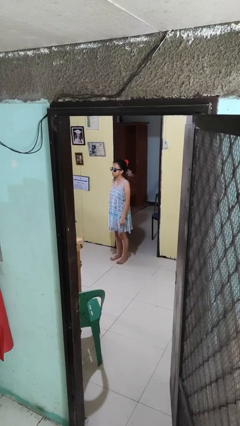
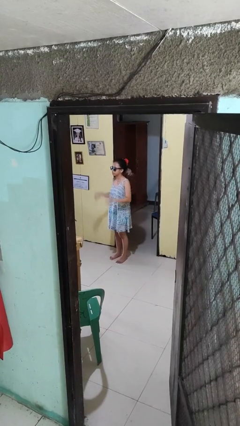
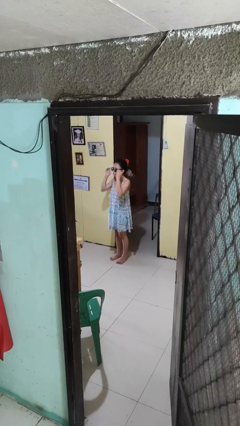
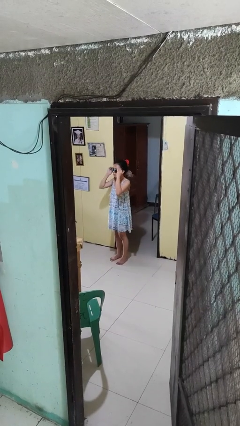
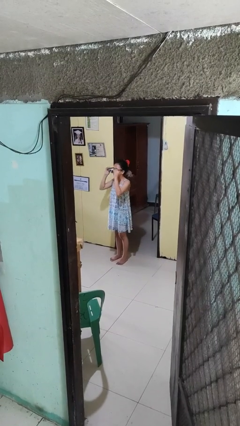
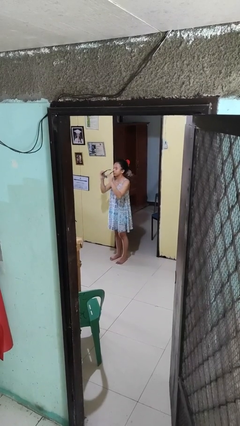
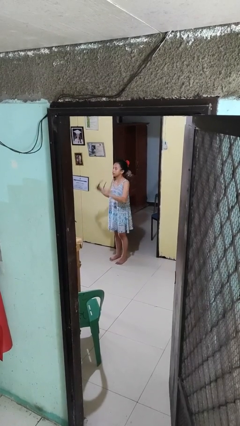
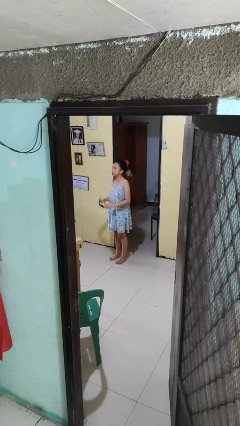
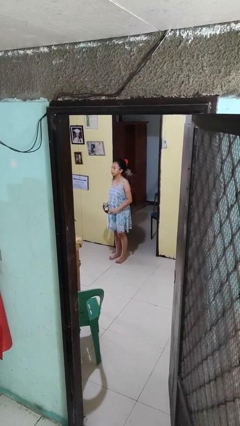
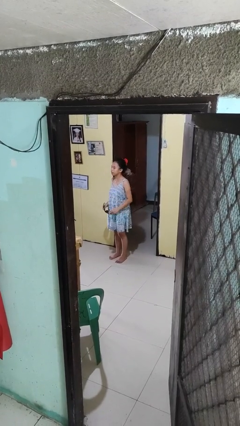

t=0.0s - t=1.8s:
person takes off sunglasses

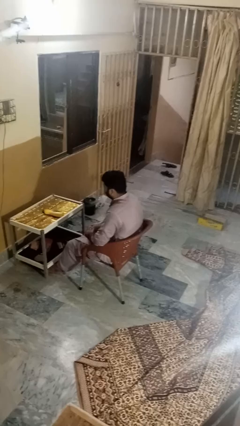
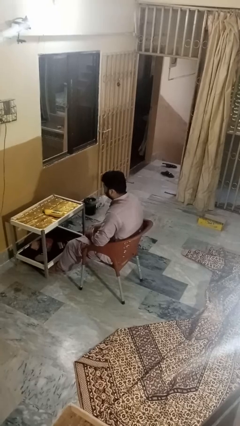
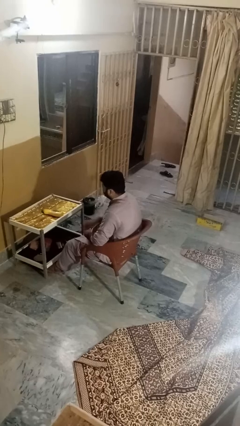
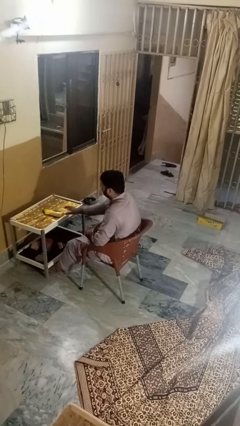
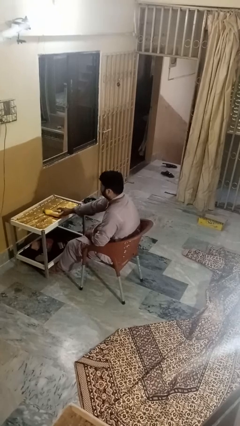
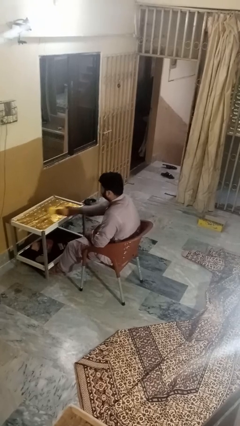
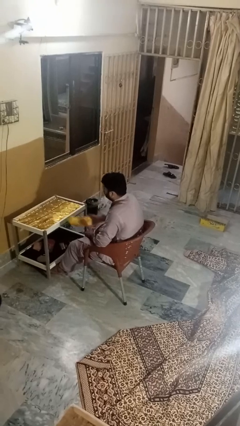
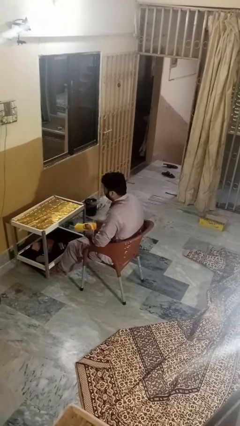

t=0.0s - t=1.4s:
person picks up object from table

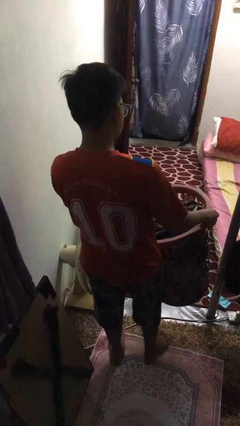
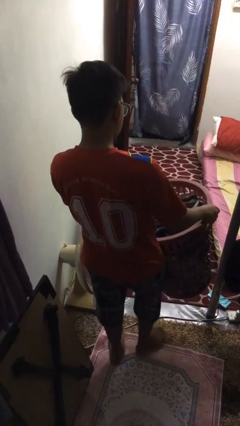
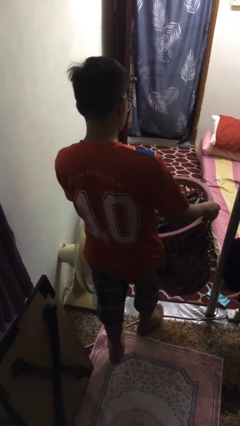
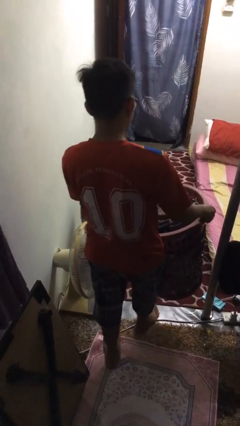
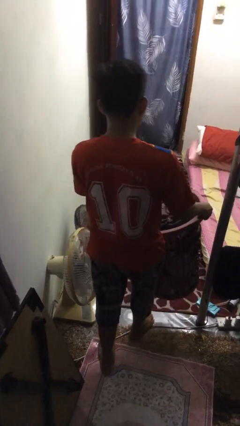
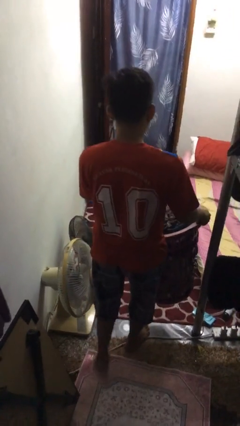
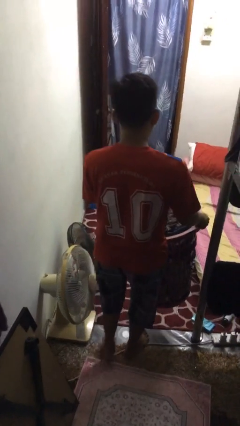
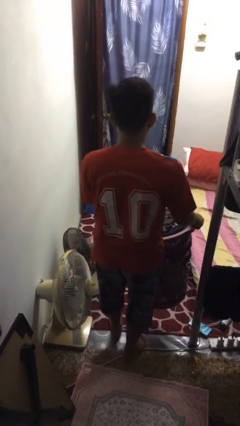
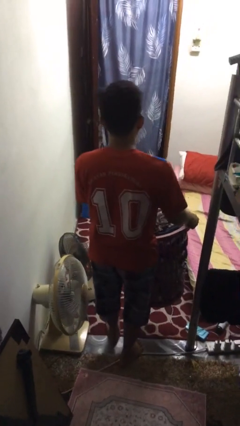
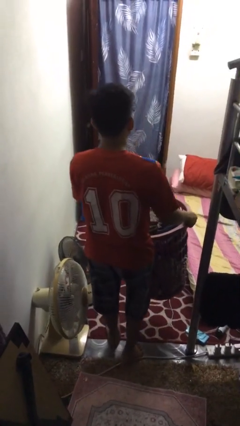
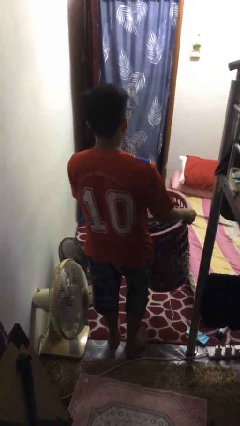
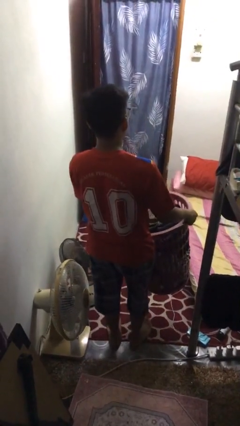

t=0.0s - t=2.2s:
person carries laundry basket

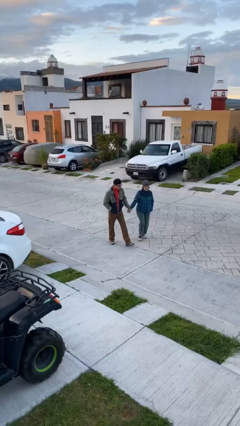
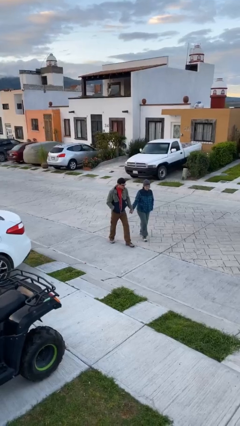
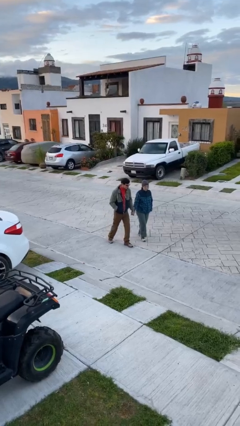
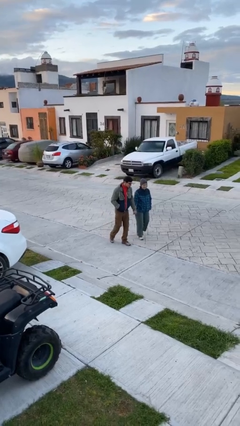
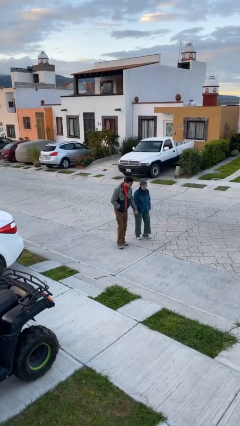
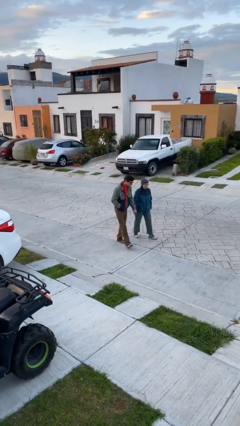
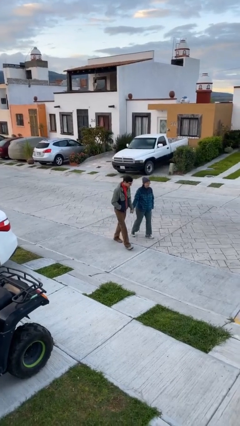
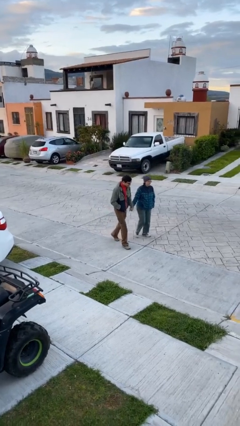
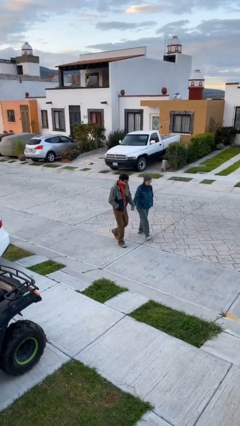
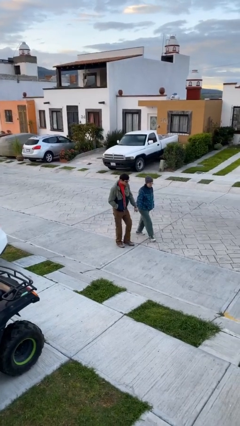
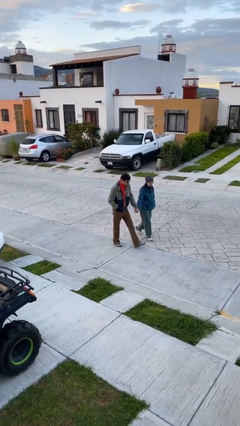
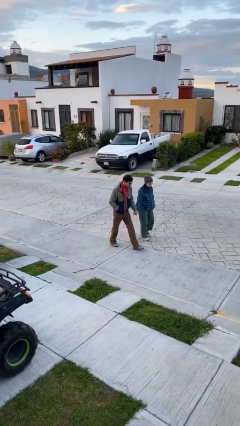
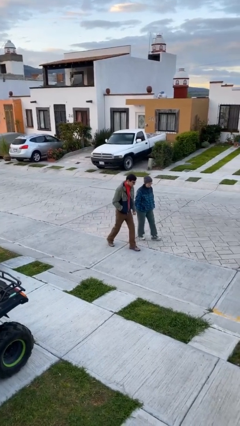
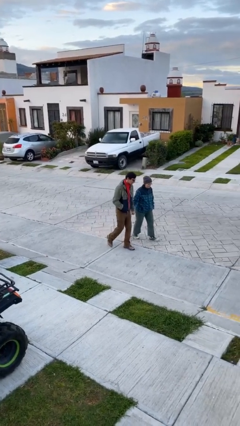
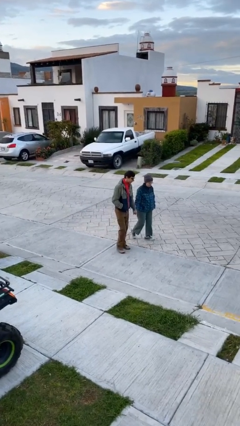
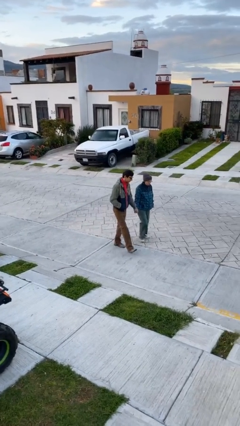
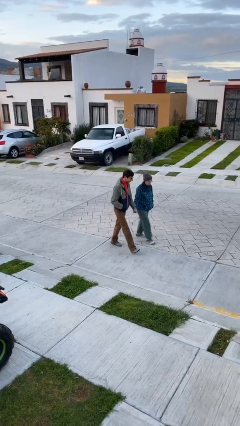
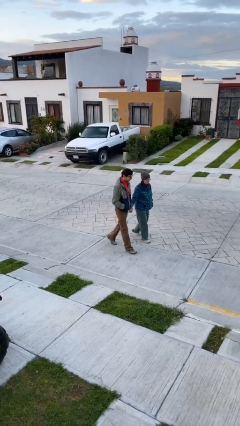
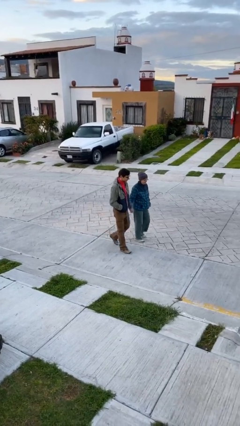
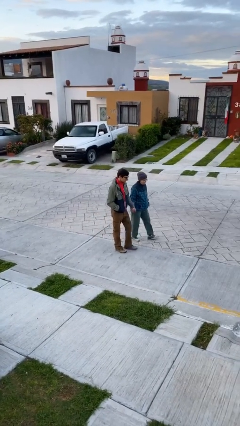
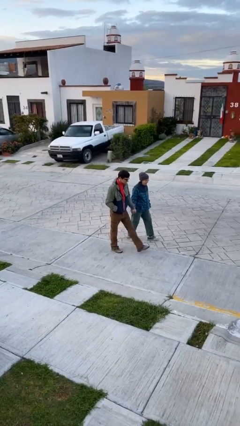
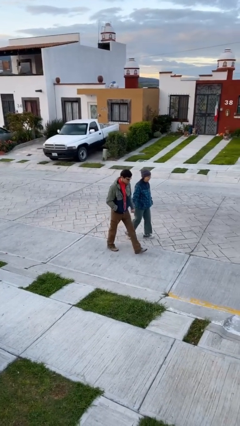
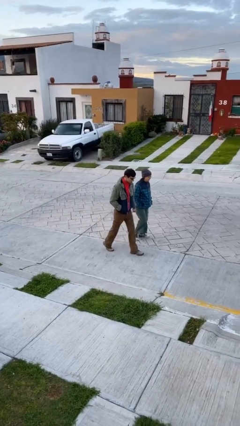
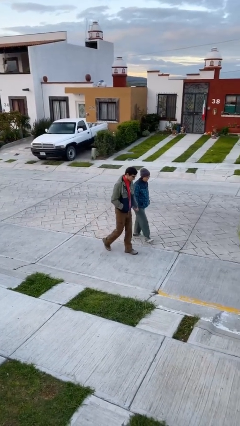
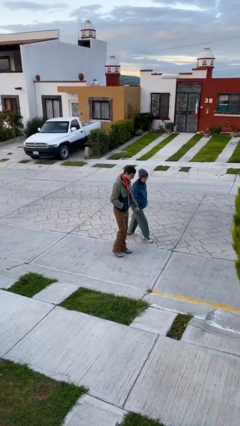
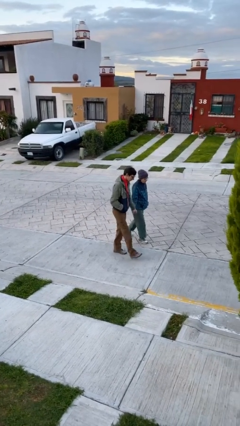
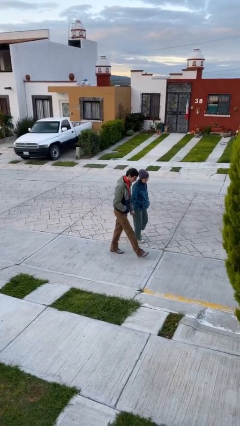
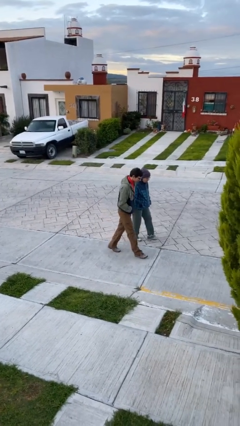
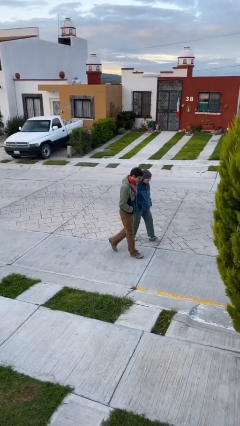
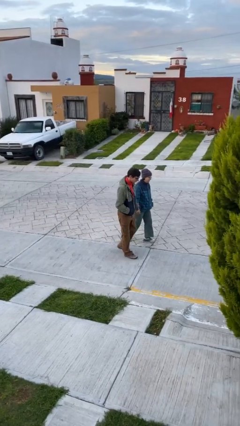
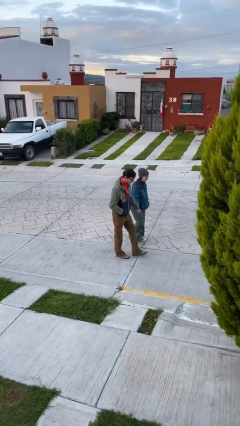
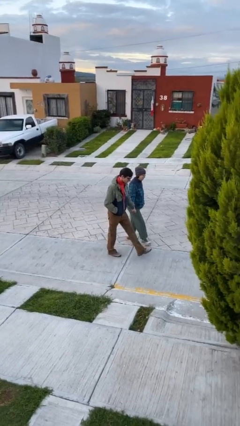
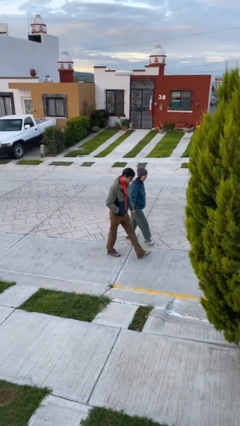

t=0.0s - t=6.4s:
person holds hand

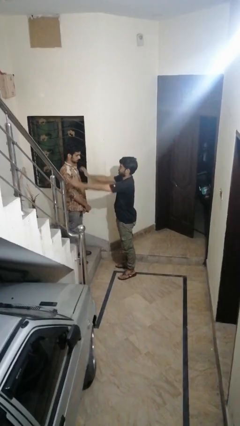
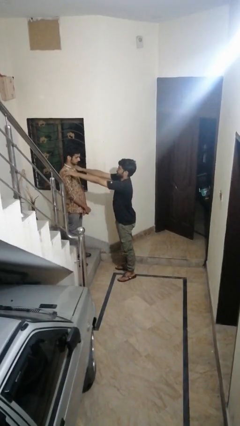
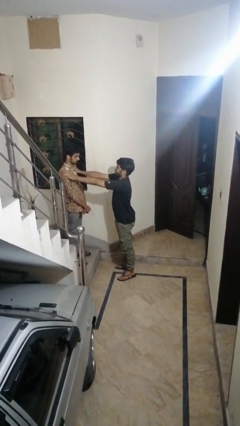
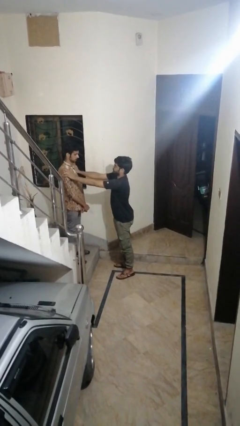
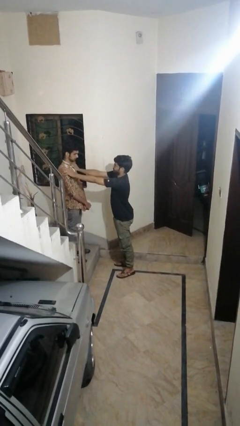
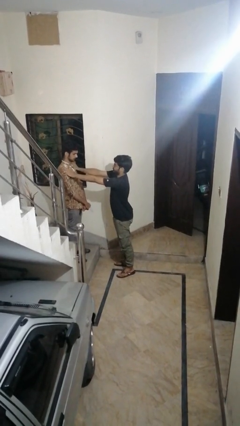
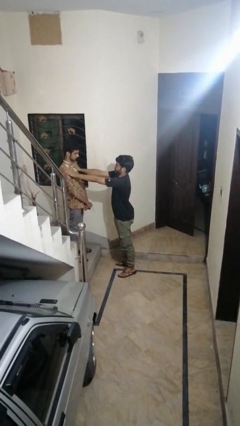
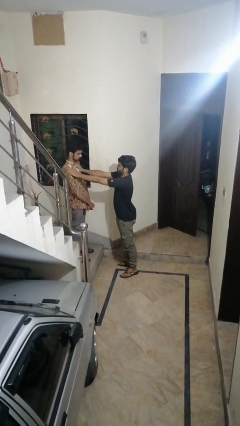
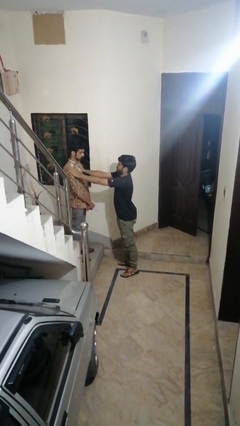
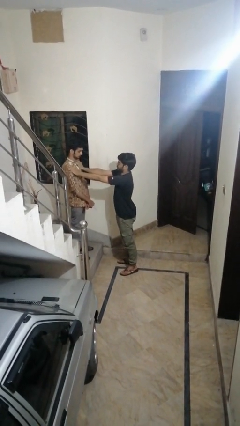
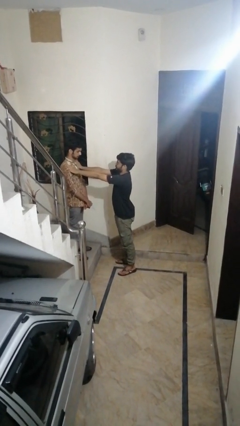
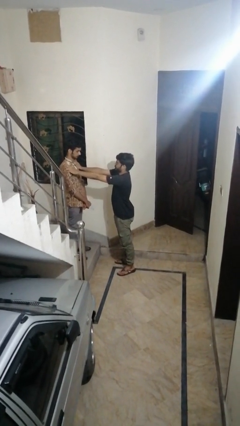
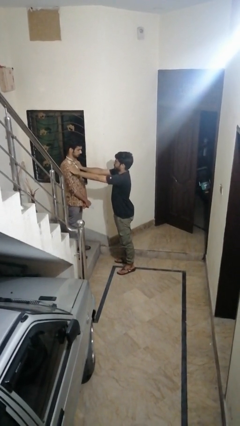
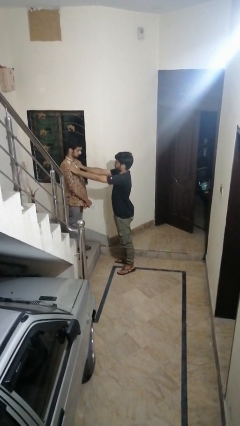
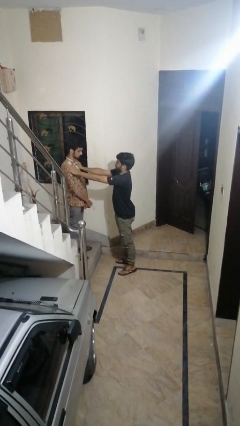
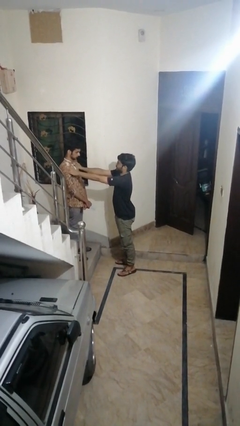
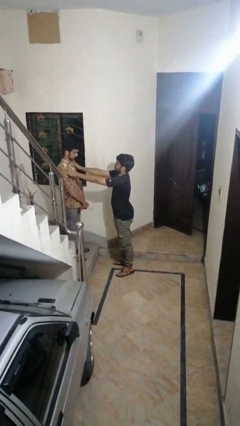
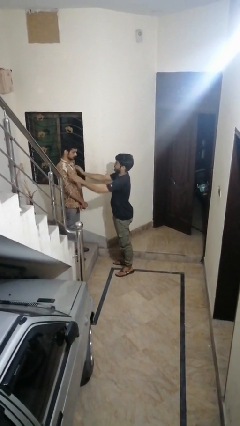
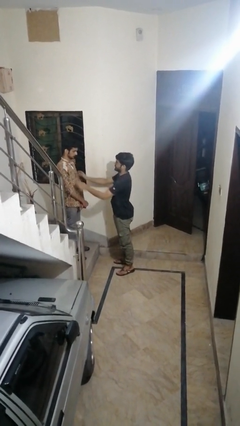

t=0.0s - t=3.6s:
person pounds shoulders of person

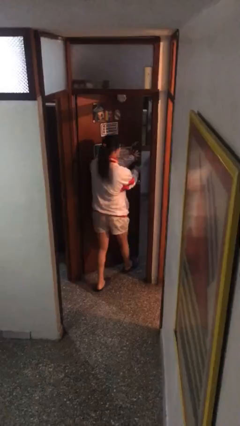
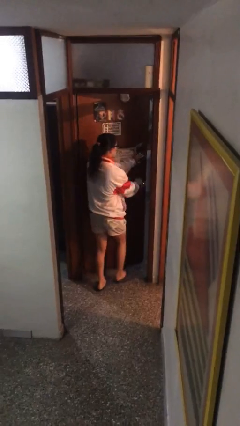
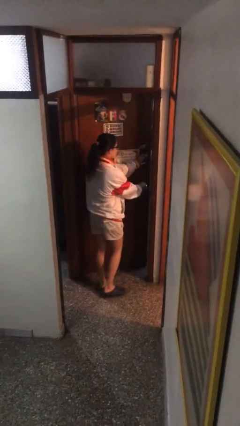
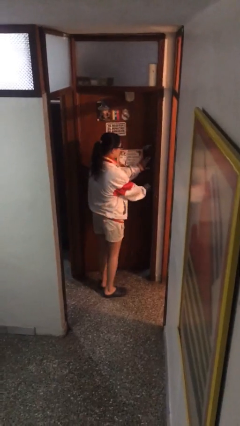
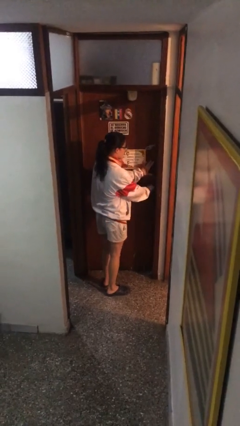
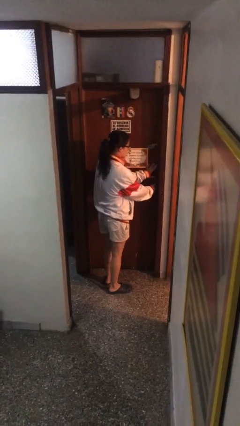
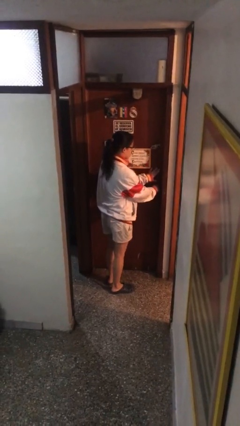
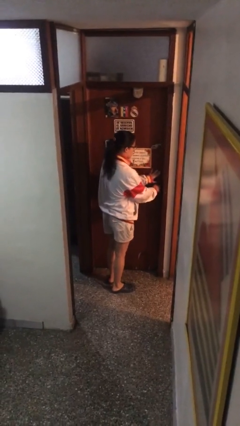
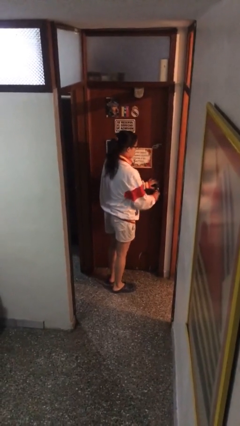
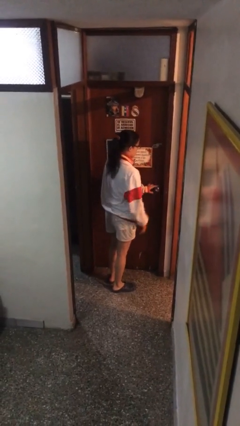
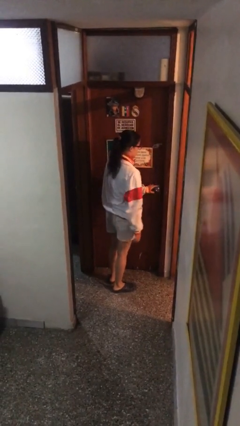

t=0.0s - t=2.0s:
person closes facility door
